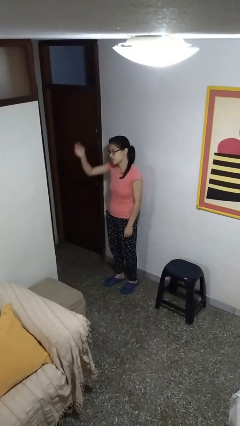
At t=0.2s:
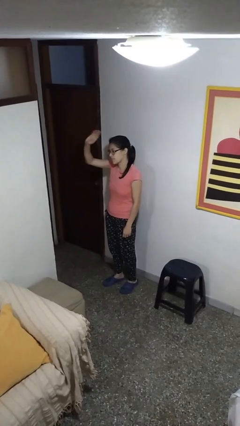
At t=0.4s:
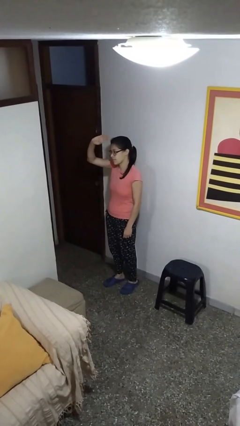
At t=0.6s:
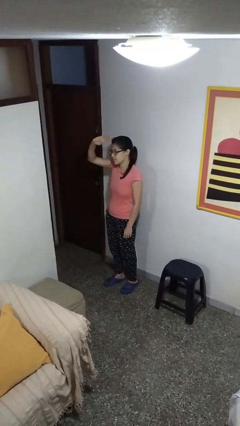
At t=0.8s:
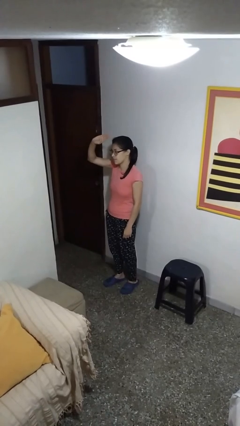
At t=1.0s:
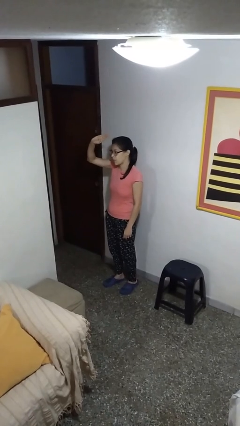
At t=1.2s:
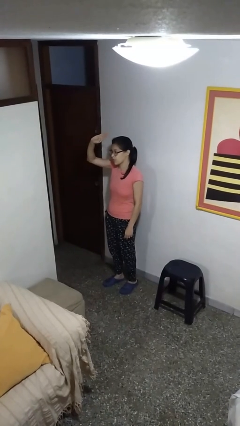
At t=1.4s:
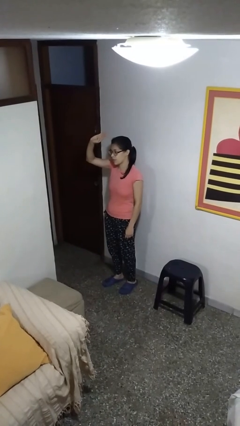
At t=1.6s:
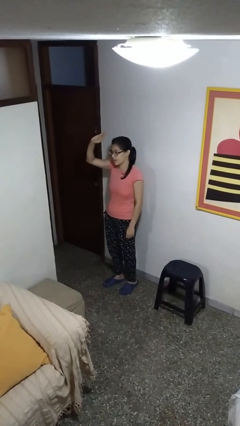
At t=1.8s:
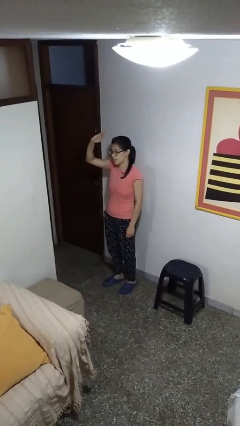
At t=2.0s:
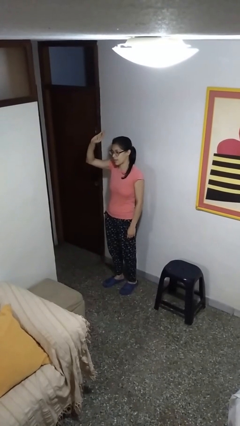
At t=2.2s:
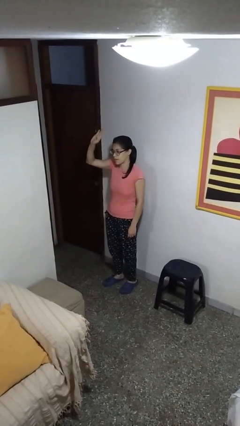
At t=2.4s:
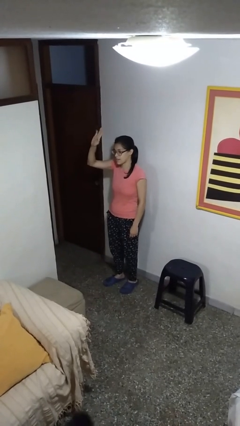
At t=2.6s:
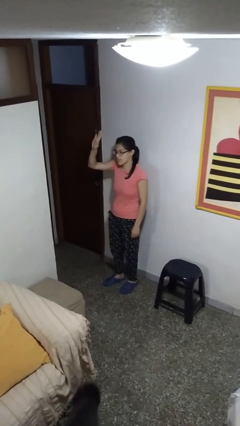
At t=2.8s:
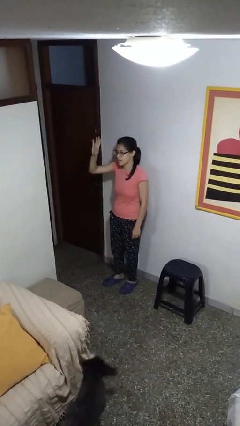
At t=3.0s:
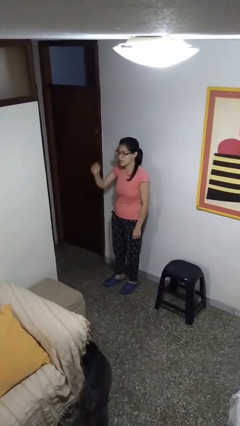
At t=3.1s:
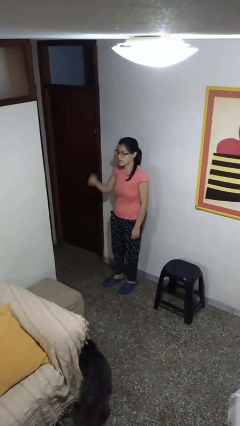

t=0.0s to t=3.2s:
person gestures raise hand

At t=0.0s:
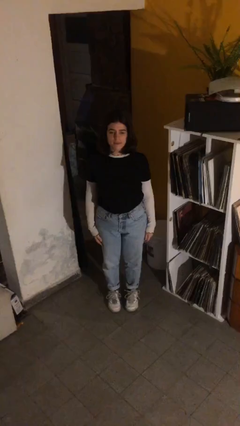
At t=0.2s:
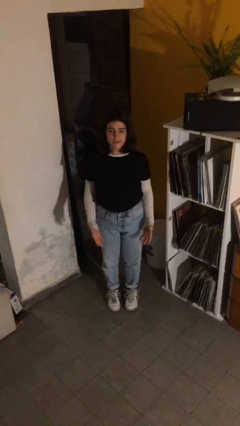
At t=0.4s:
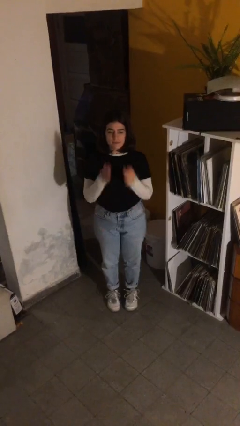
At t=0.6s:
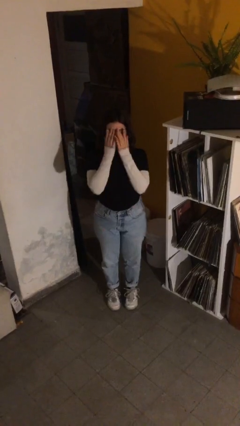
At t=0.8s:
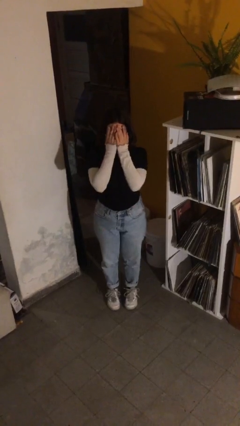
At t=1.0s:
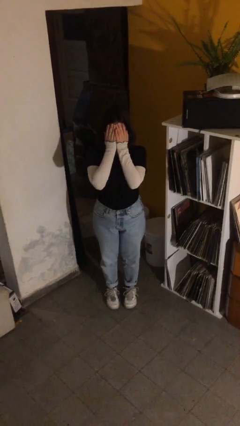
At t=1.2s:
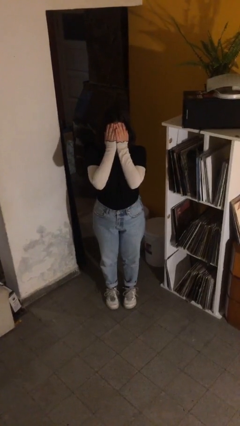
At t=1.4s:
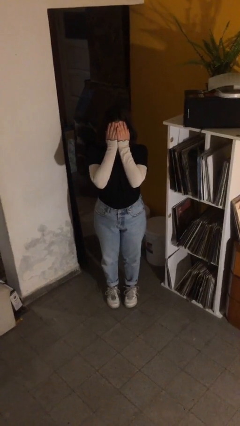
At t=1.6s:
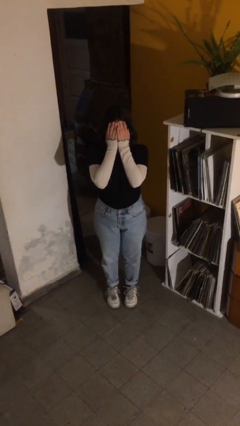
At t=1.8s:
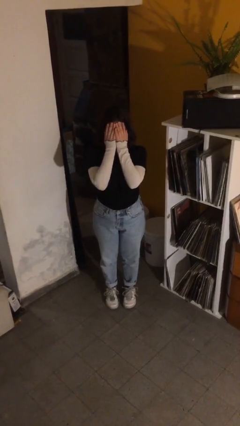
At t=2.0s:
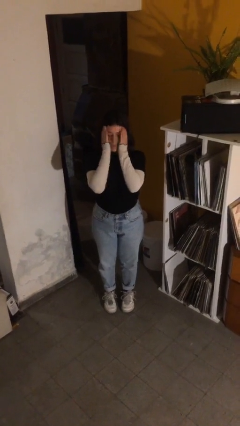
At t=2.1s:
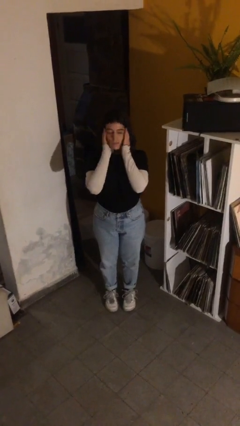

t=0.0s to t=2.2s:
person covers face with hands

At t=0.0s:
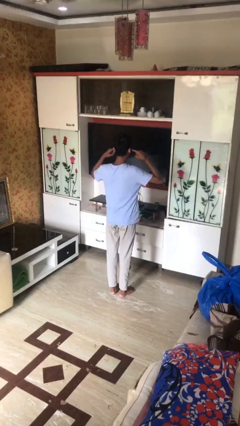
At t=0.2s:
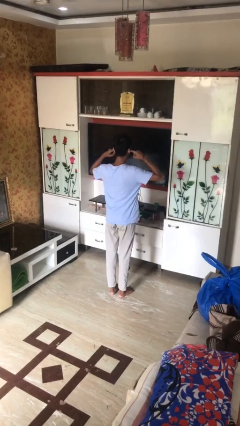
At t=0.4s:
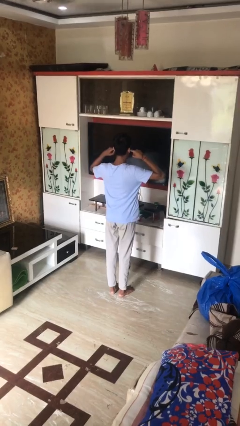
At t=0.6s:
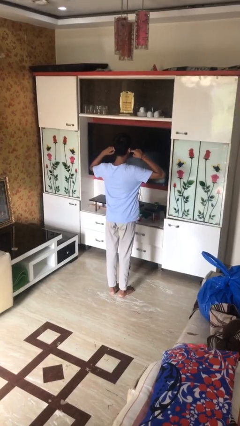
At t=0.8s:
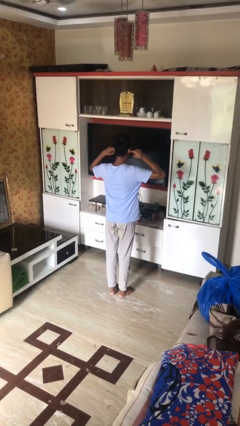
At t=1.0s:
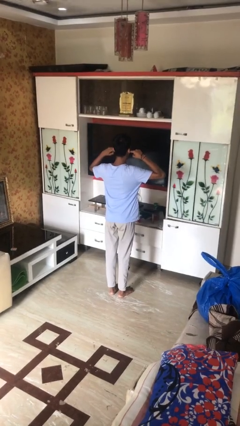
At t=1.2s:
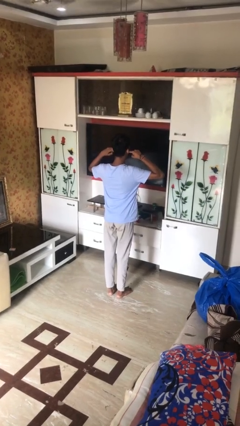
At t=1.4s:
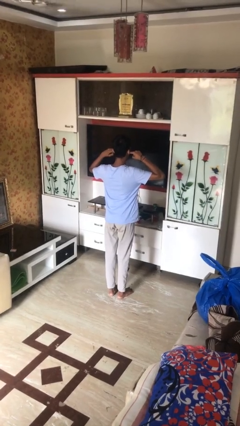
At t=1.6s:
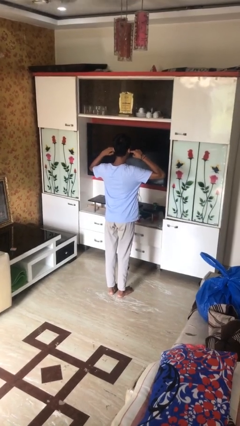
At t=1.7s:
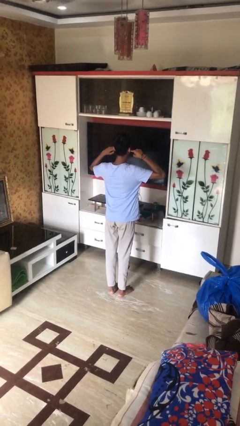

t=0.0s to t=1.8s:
person puts fingers in ear

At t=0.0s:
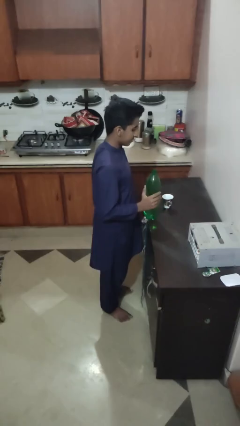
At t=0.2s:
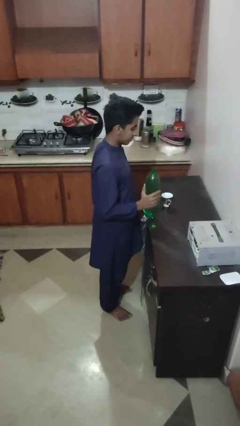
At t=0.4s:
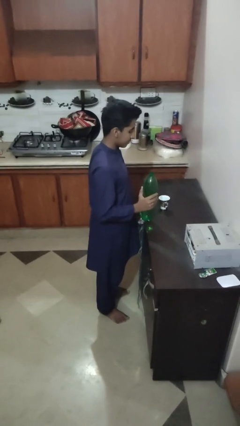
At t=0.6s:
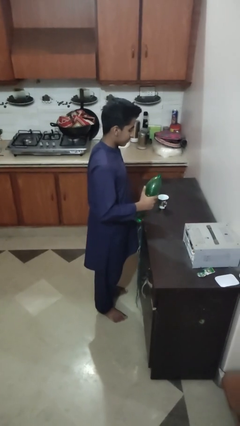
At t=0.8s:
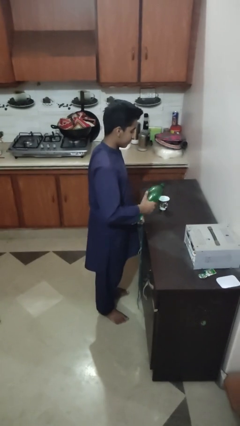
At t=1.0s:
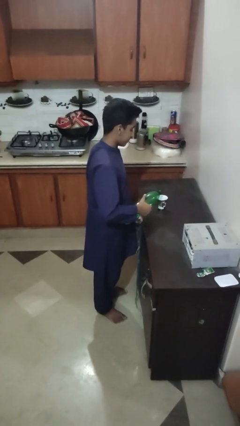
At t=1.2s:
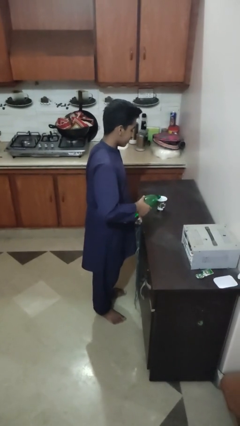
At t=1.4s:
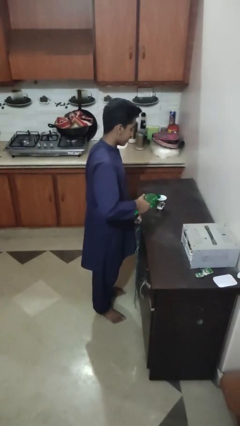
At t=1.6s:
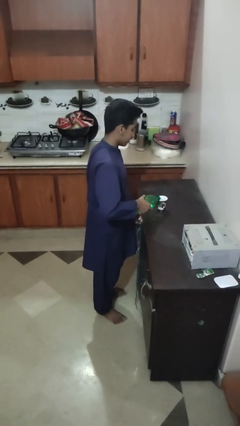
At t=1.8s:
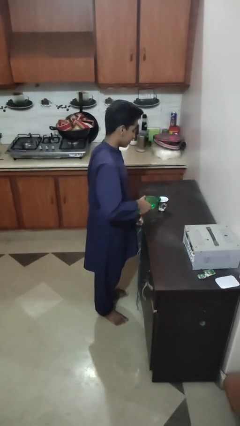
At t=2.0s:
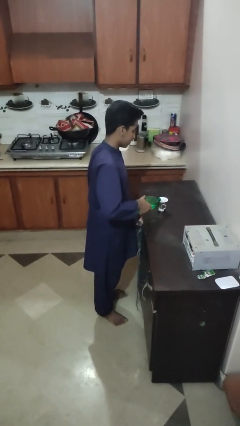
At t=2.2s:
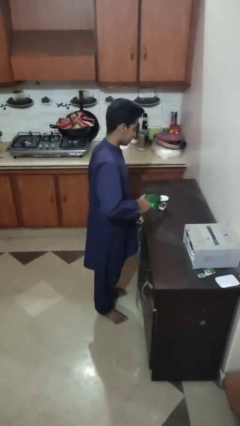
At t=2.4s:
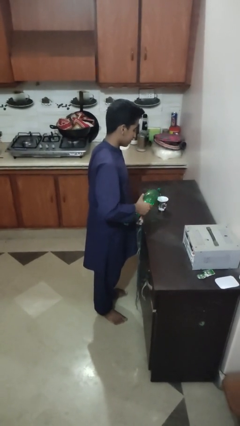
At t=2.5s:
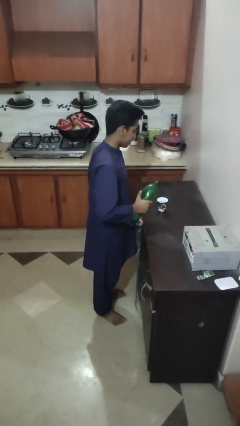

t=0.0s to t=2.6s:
person pours liquid into cup

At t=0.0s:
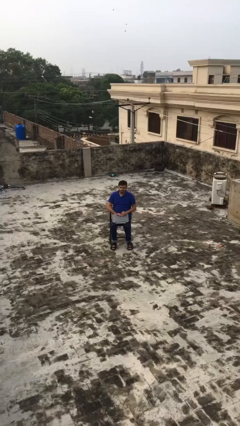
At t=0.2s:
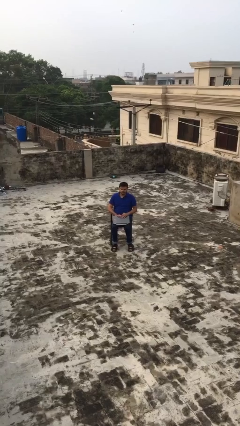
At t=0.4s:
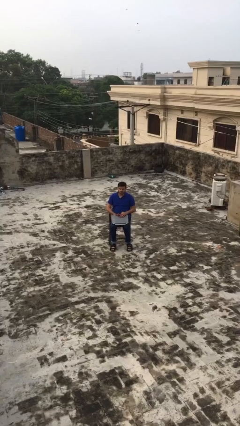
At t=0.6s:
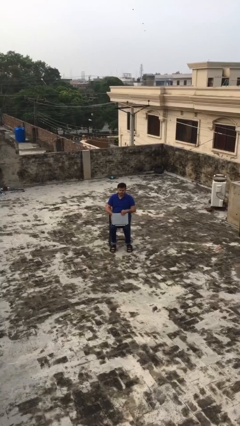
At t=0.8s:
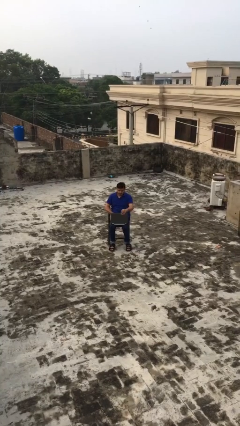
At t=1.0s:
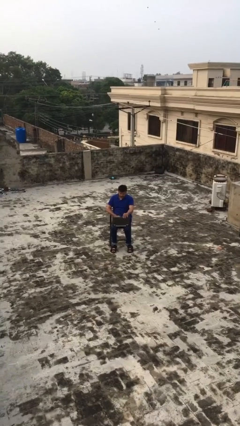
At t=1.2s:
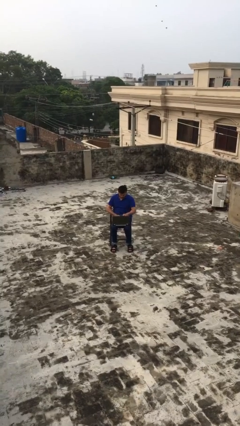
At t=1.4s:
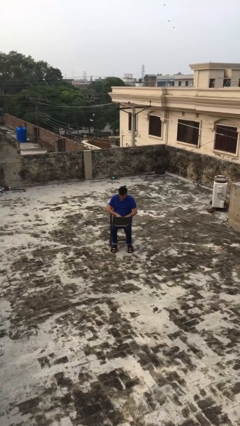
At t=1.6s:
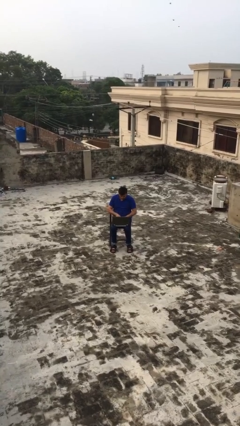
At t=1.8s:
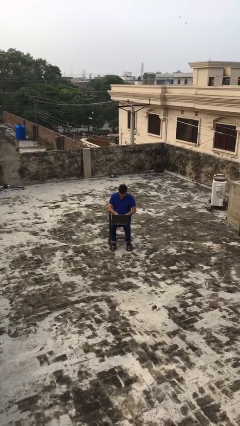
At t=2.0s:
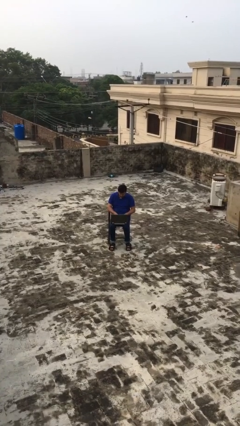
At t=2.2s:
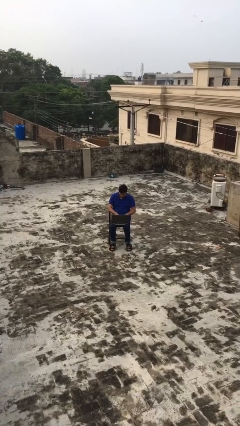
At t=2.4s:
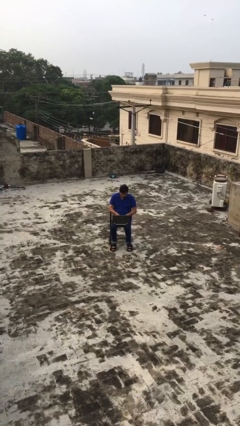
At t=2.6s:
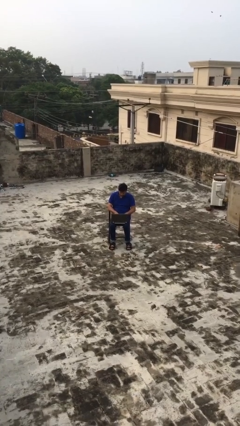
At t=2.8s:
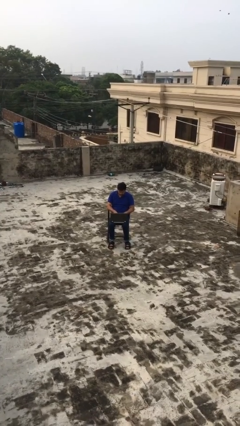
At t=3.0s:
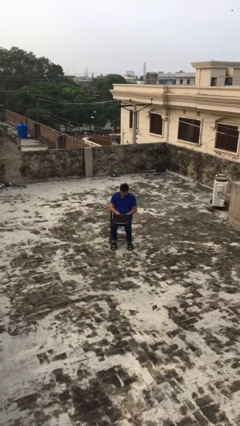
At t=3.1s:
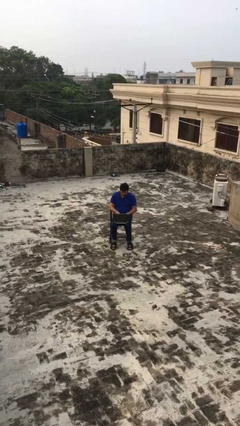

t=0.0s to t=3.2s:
person interacts with laptop

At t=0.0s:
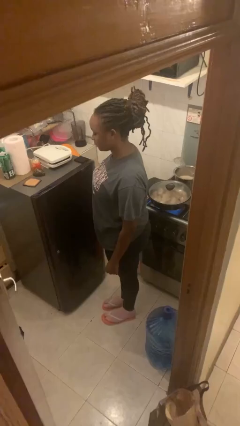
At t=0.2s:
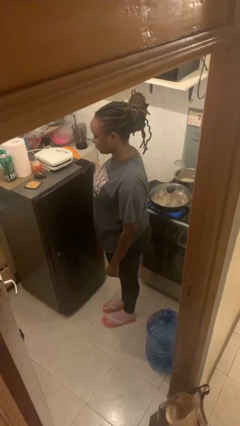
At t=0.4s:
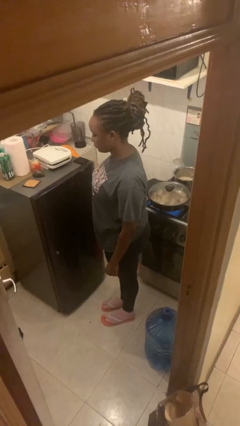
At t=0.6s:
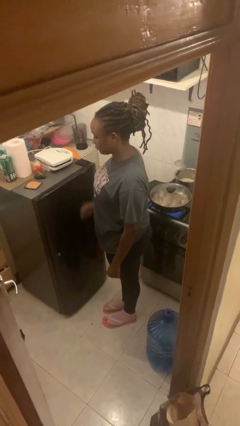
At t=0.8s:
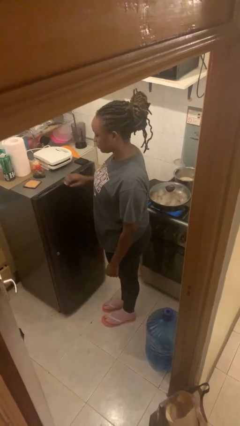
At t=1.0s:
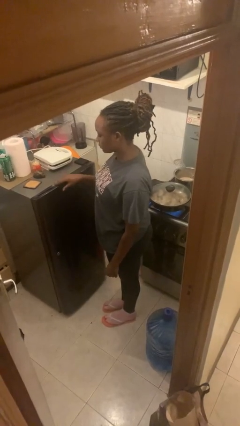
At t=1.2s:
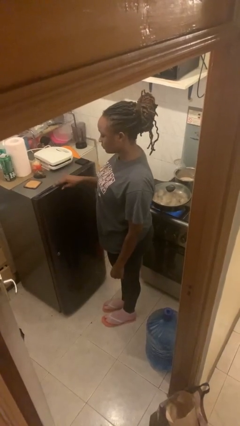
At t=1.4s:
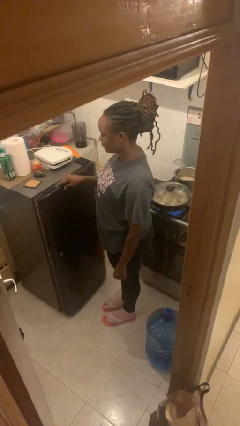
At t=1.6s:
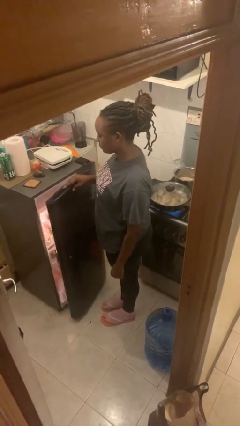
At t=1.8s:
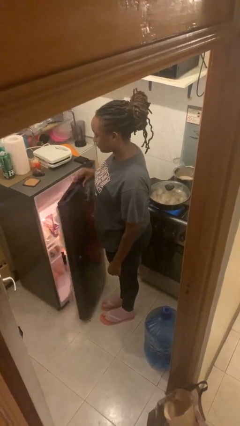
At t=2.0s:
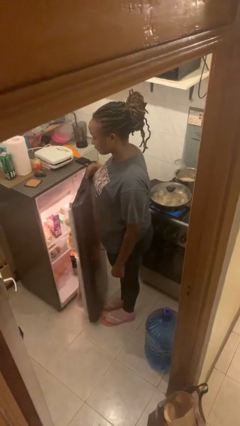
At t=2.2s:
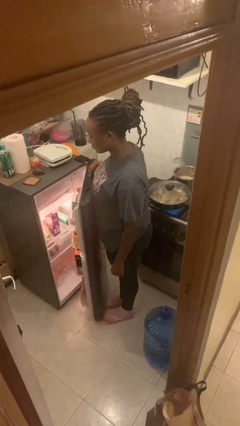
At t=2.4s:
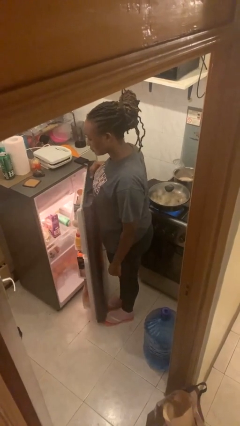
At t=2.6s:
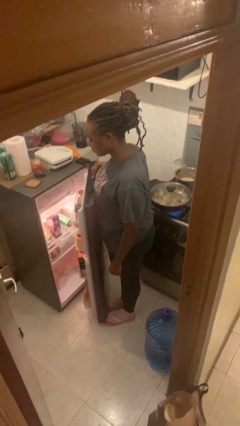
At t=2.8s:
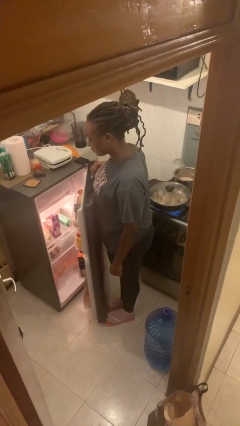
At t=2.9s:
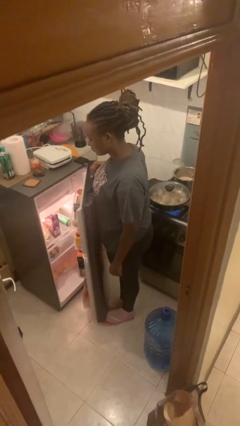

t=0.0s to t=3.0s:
person opens refrigerator

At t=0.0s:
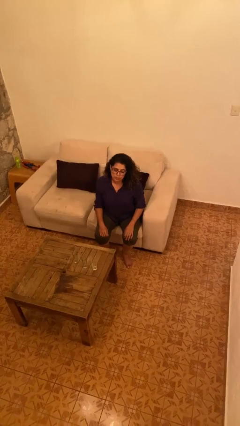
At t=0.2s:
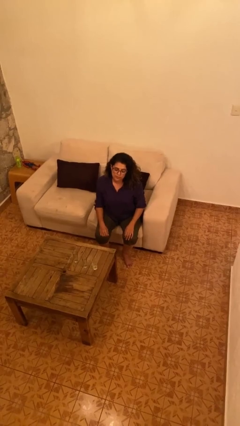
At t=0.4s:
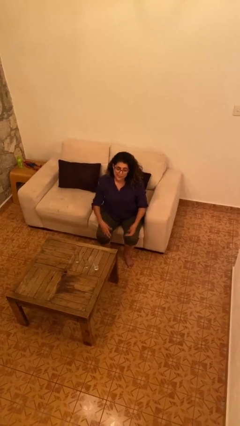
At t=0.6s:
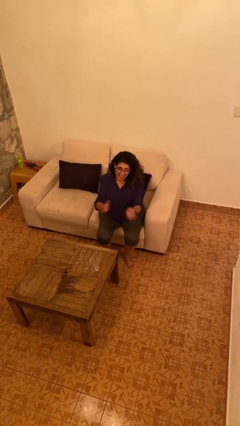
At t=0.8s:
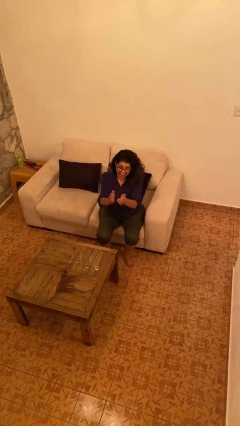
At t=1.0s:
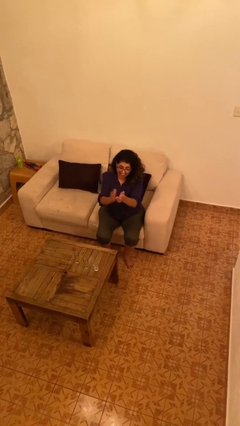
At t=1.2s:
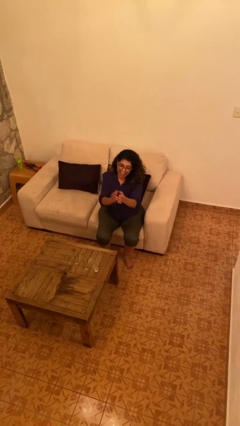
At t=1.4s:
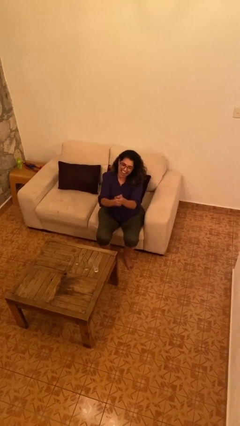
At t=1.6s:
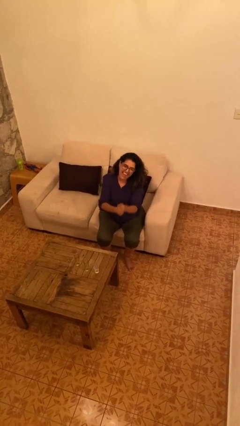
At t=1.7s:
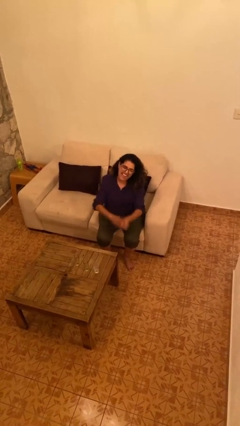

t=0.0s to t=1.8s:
person claps hands
